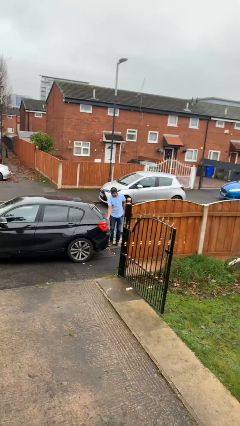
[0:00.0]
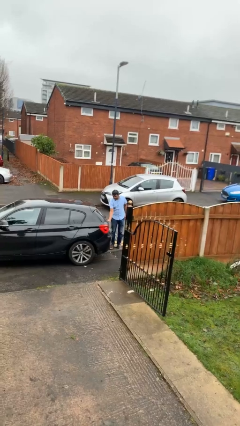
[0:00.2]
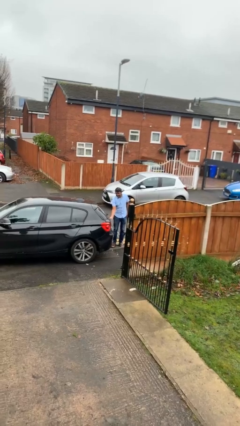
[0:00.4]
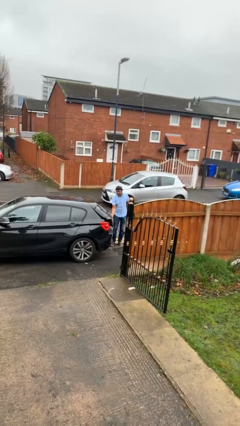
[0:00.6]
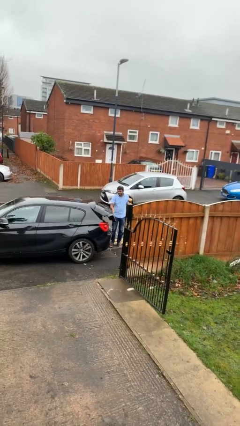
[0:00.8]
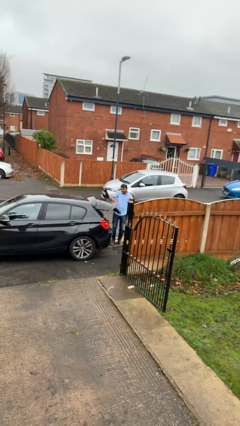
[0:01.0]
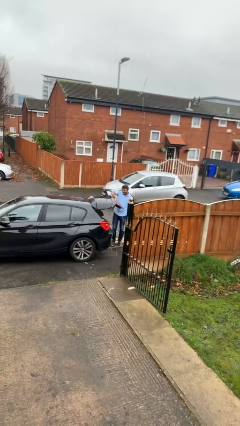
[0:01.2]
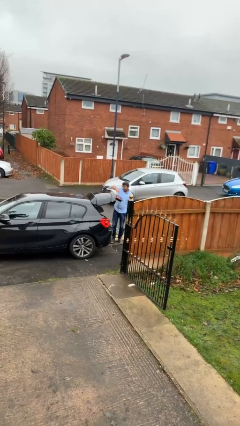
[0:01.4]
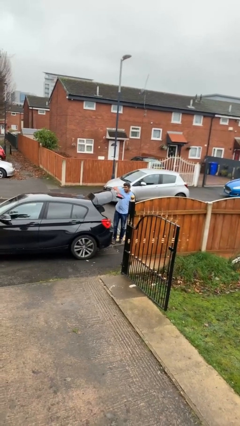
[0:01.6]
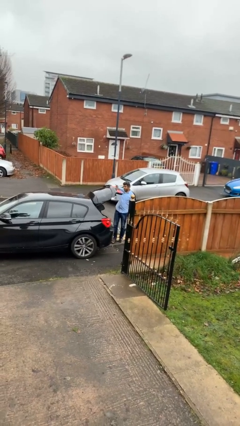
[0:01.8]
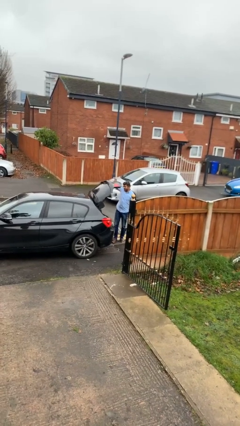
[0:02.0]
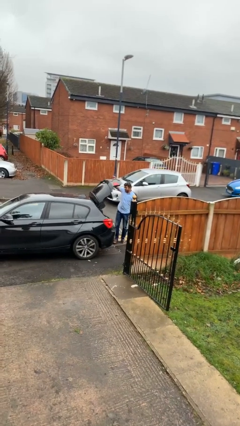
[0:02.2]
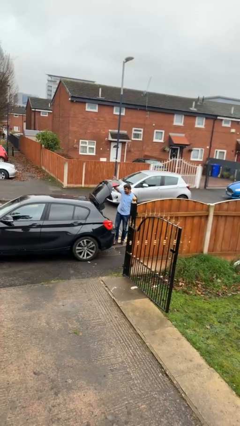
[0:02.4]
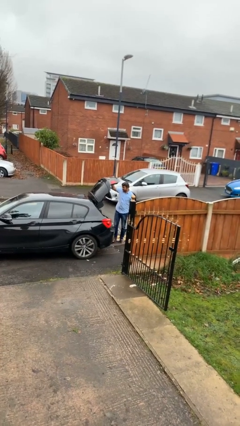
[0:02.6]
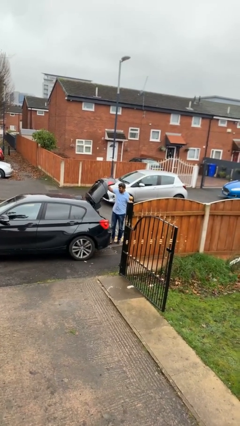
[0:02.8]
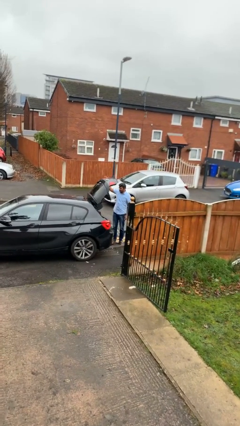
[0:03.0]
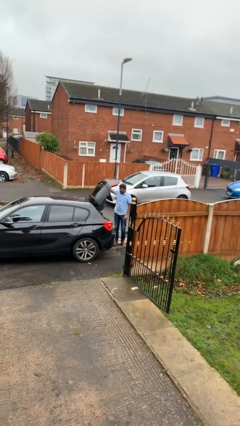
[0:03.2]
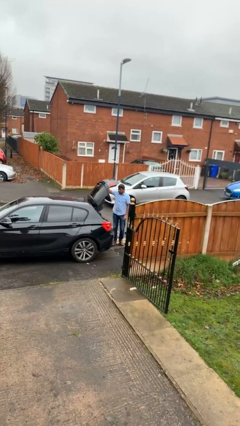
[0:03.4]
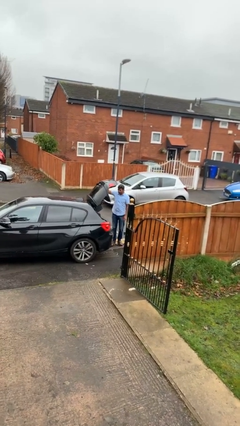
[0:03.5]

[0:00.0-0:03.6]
person opens car trunk

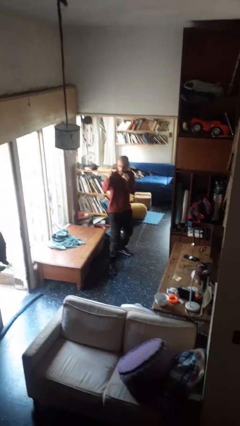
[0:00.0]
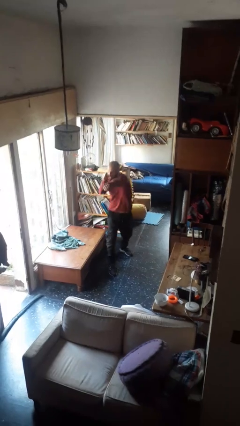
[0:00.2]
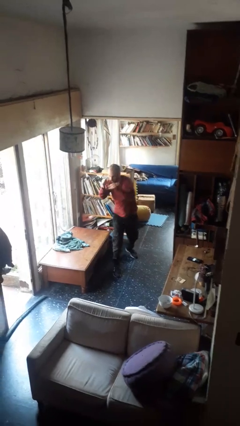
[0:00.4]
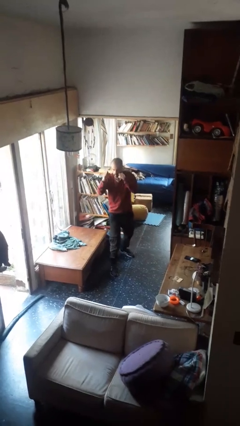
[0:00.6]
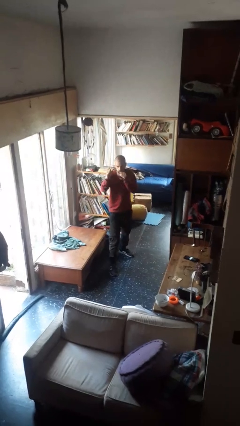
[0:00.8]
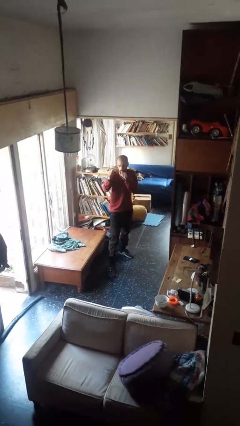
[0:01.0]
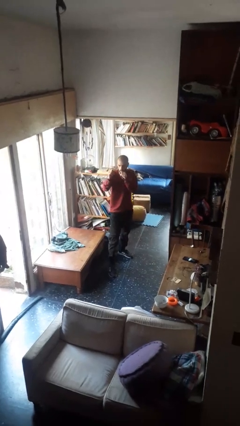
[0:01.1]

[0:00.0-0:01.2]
person punches

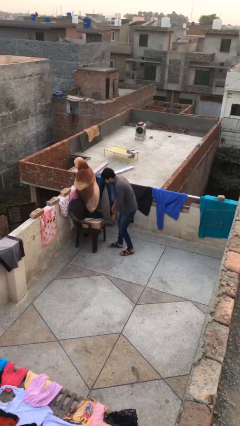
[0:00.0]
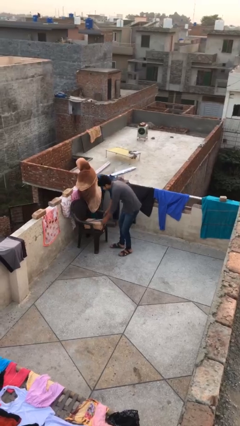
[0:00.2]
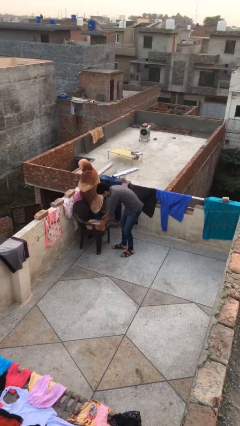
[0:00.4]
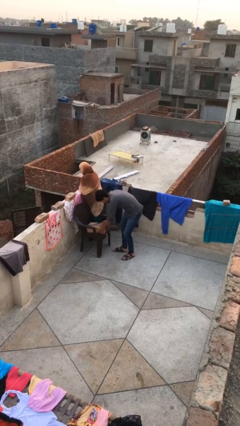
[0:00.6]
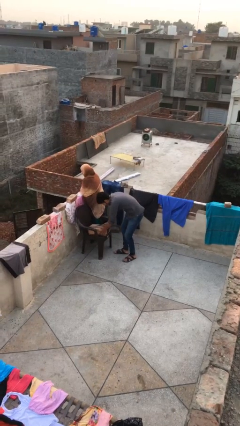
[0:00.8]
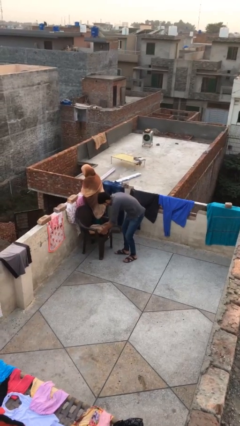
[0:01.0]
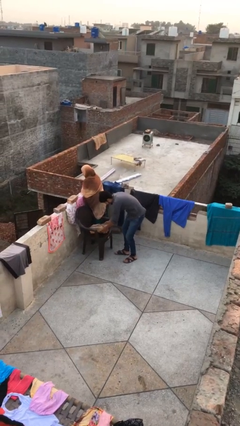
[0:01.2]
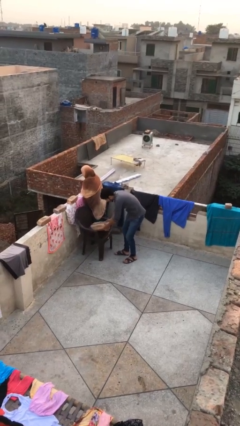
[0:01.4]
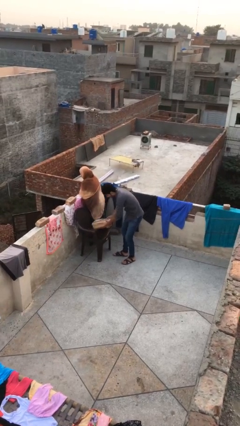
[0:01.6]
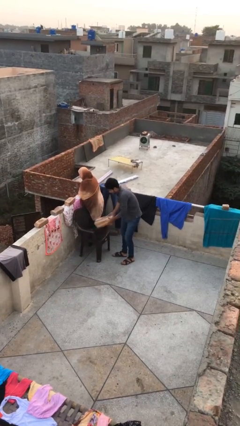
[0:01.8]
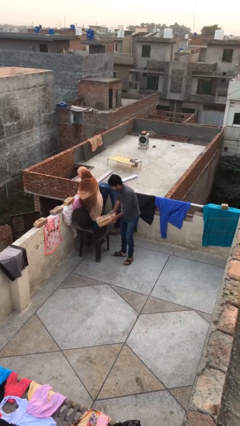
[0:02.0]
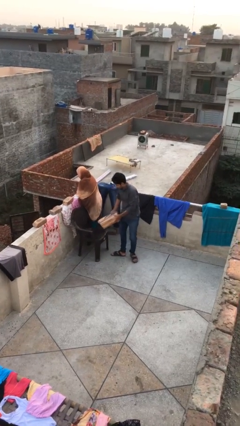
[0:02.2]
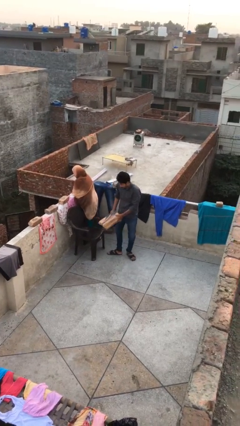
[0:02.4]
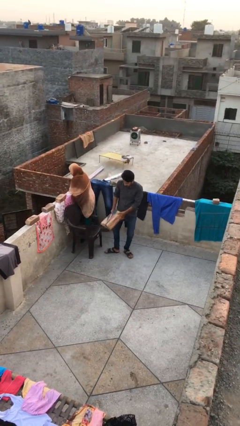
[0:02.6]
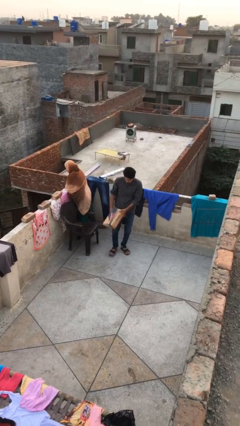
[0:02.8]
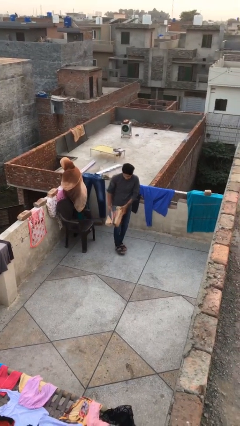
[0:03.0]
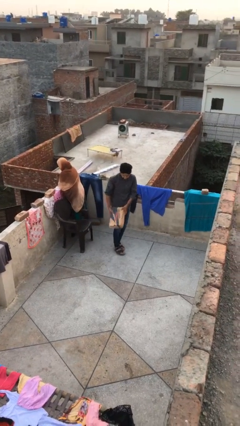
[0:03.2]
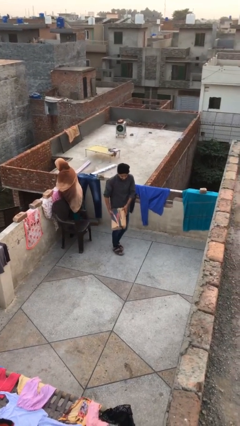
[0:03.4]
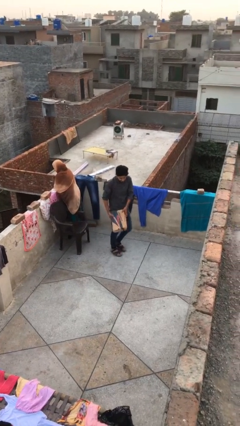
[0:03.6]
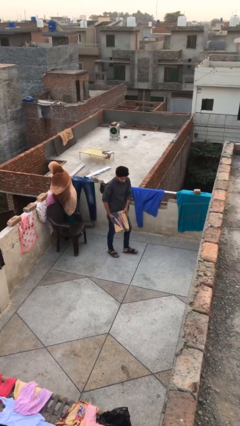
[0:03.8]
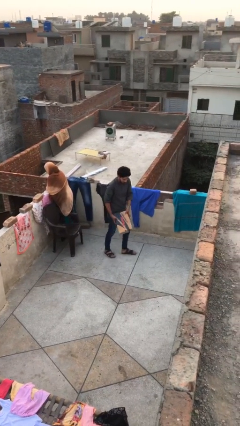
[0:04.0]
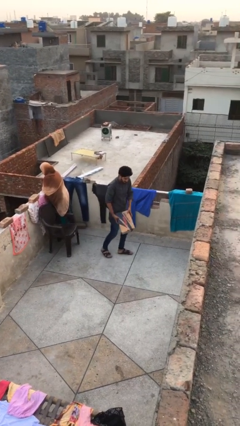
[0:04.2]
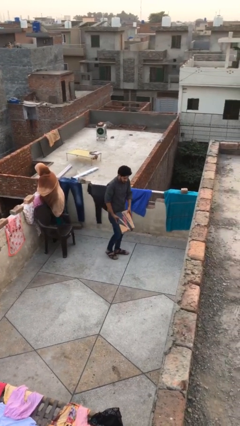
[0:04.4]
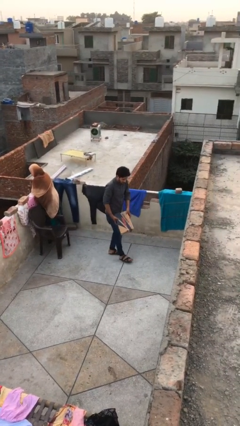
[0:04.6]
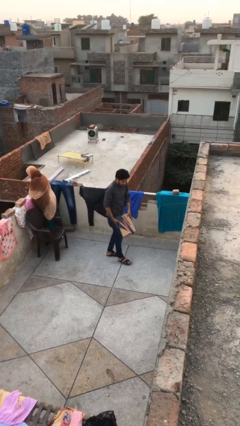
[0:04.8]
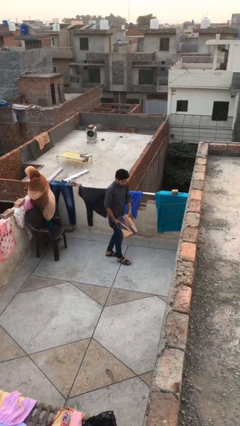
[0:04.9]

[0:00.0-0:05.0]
person steals object from person

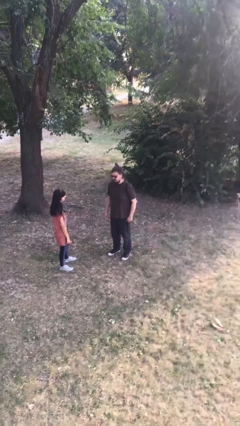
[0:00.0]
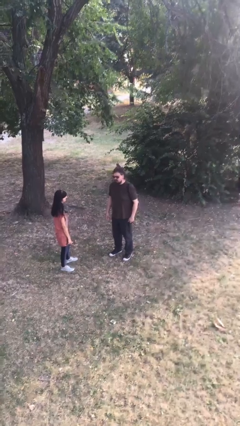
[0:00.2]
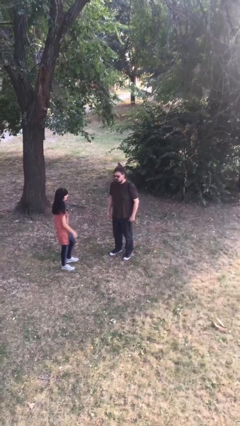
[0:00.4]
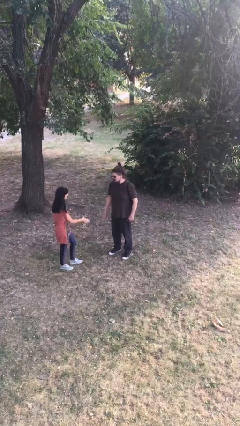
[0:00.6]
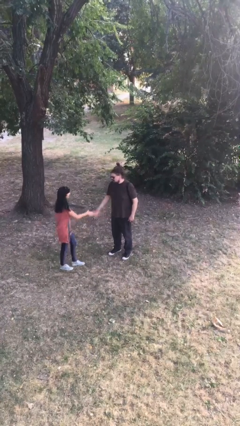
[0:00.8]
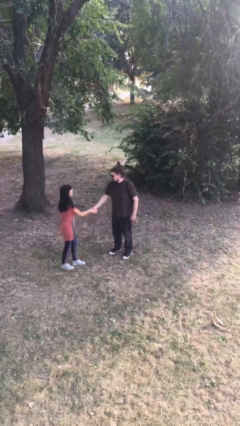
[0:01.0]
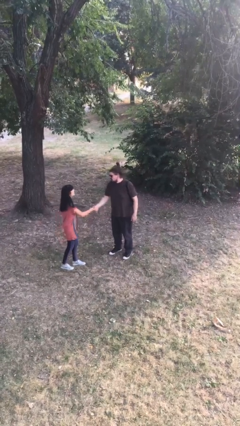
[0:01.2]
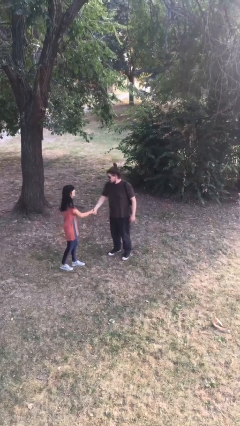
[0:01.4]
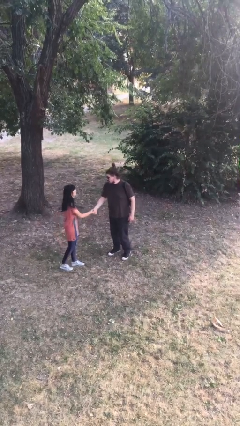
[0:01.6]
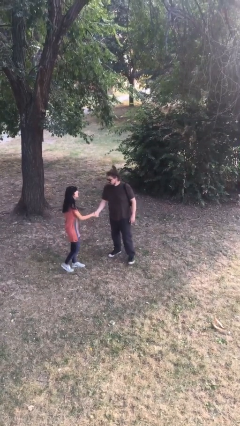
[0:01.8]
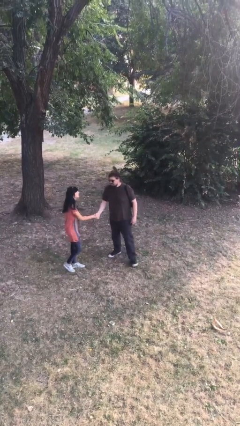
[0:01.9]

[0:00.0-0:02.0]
person shakes hand

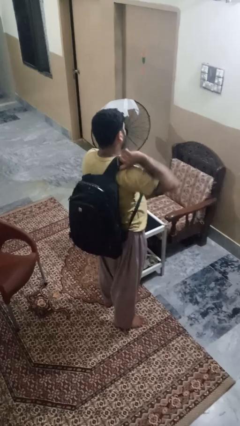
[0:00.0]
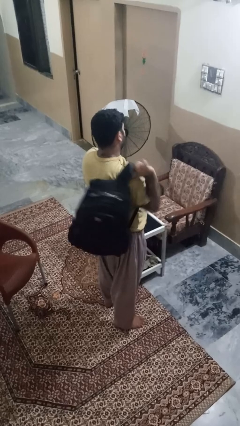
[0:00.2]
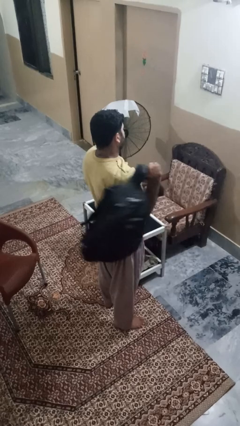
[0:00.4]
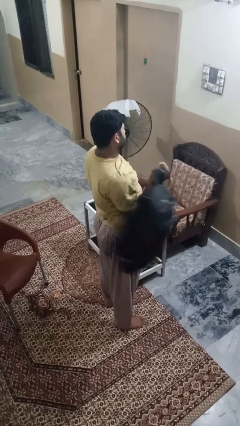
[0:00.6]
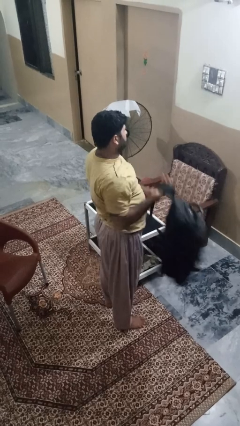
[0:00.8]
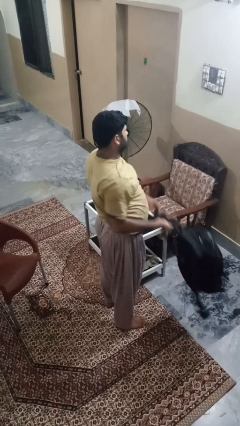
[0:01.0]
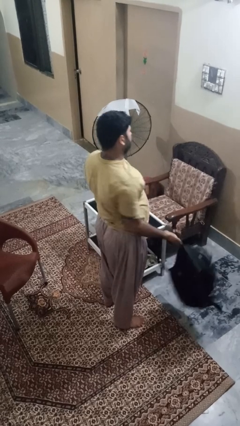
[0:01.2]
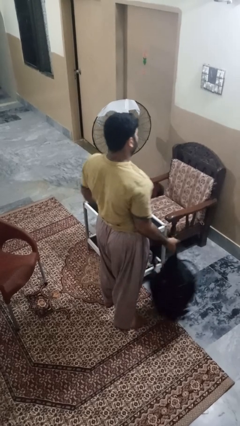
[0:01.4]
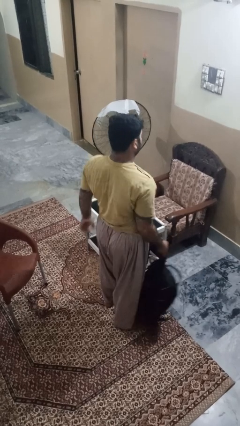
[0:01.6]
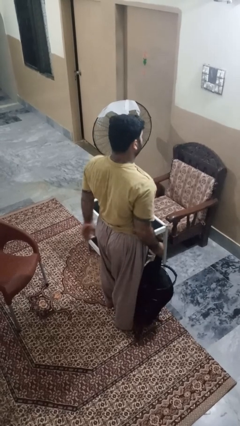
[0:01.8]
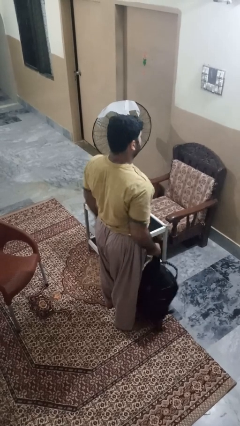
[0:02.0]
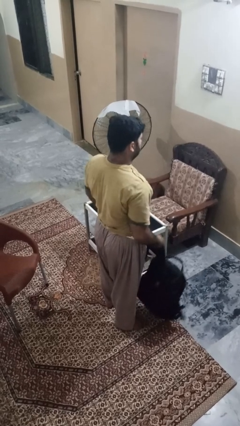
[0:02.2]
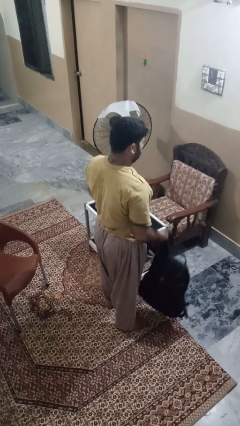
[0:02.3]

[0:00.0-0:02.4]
person takes off backpack

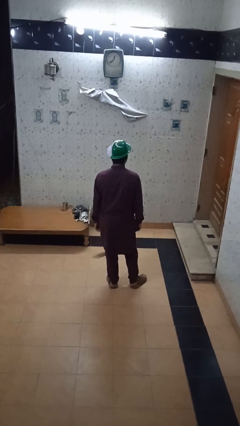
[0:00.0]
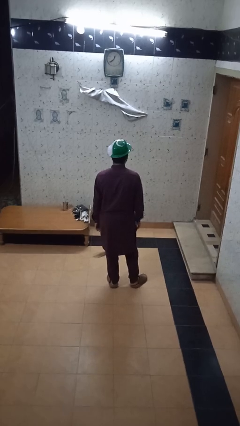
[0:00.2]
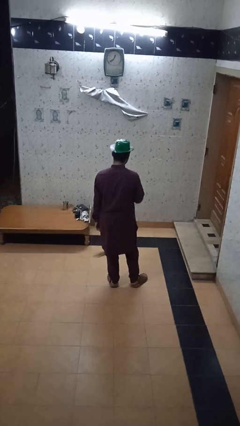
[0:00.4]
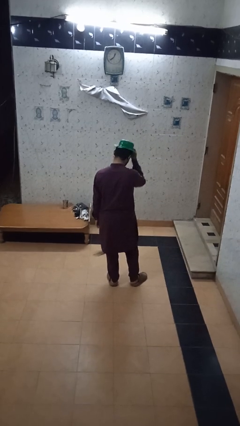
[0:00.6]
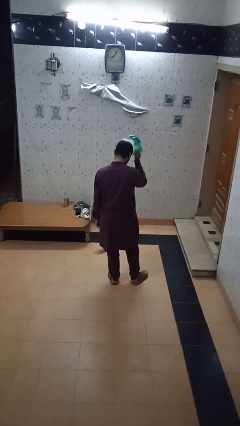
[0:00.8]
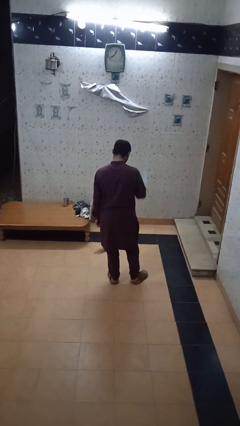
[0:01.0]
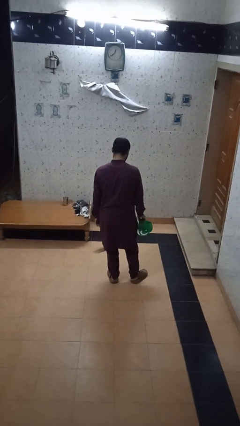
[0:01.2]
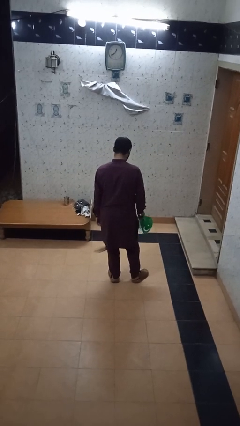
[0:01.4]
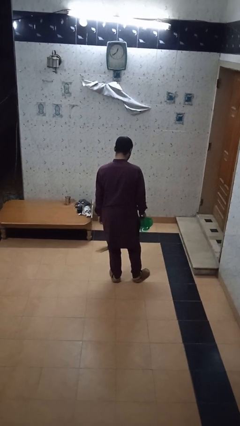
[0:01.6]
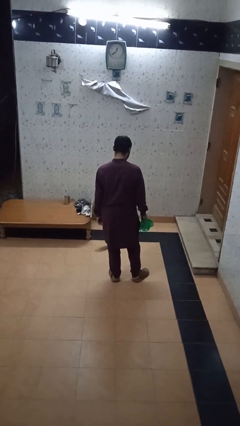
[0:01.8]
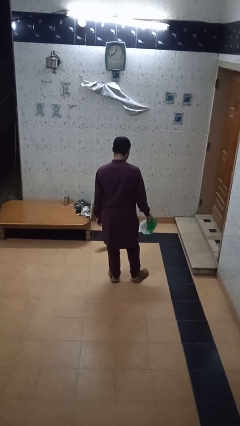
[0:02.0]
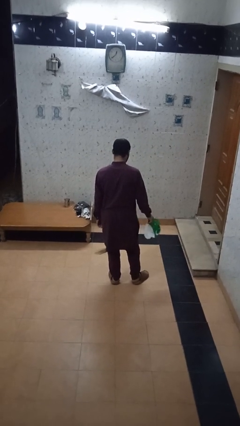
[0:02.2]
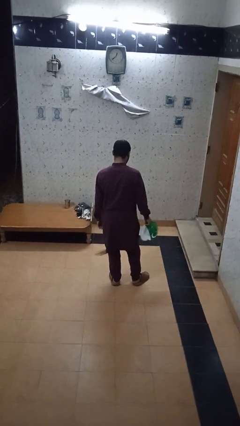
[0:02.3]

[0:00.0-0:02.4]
person takes off hat

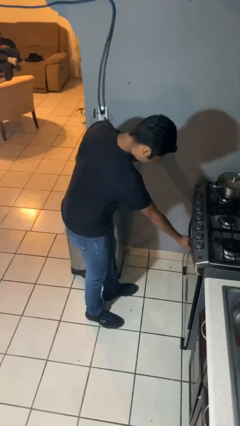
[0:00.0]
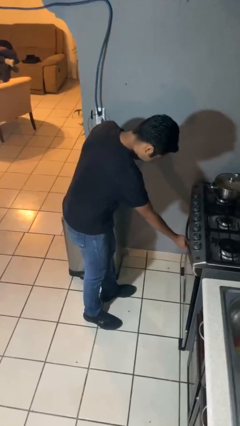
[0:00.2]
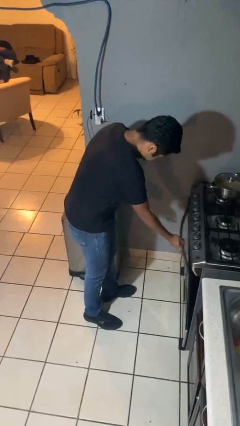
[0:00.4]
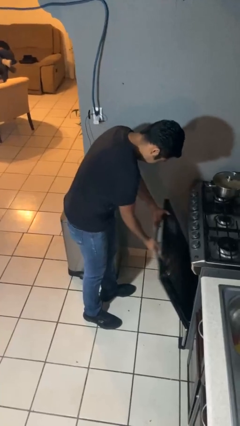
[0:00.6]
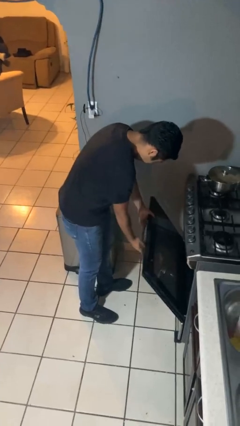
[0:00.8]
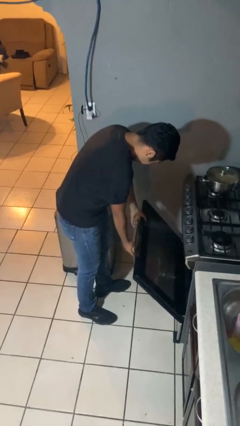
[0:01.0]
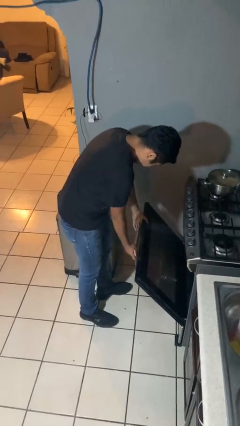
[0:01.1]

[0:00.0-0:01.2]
person opens oven door
